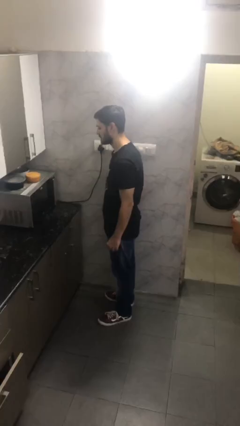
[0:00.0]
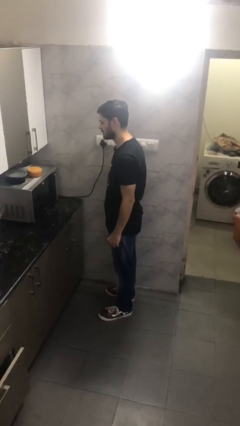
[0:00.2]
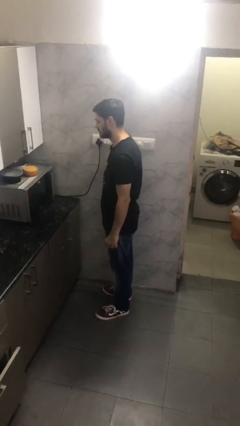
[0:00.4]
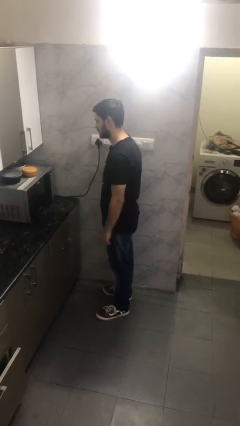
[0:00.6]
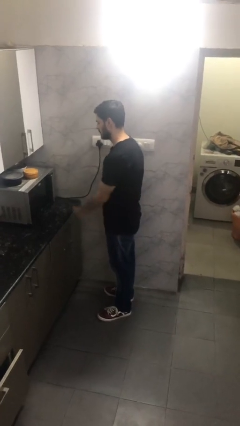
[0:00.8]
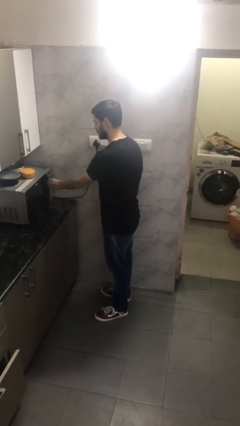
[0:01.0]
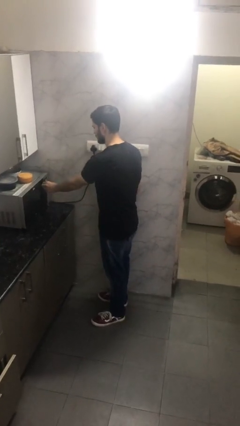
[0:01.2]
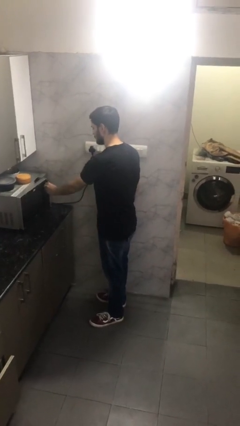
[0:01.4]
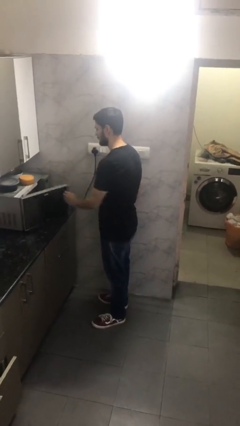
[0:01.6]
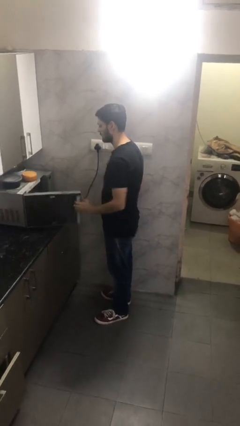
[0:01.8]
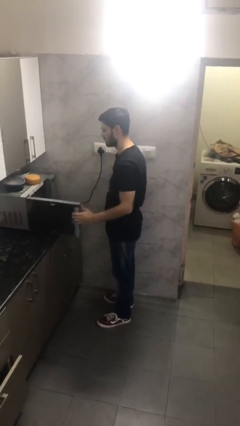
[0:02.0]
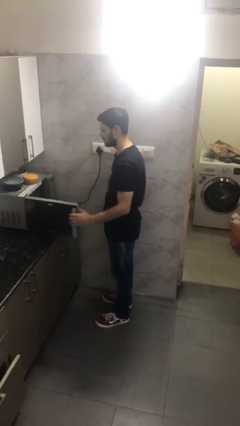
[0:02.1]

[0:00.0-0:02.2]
person opens microwave

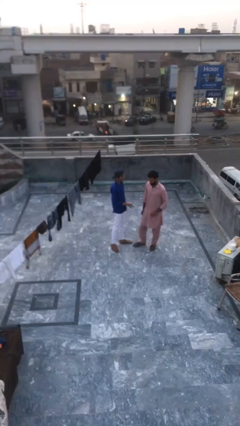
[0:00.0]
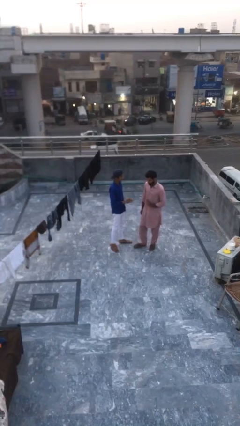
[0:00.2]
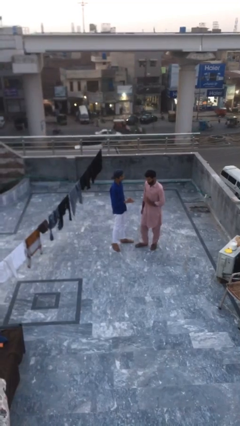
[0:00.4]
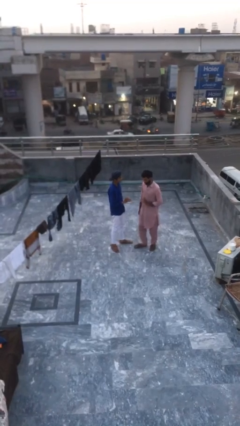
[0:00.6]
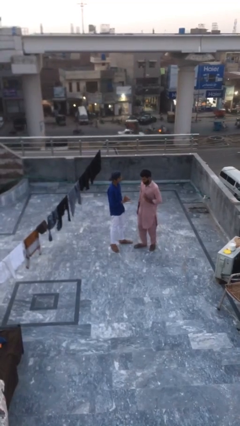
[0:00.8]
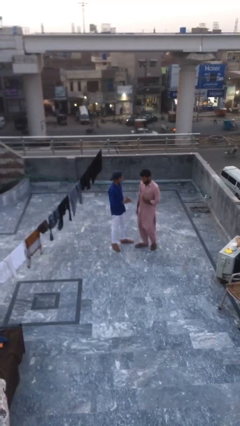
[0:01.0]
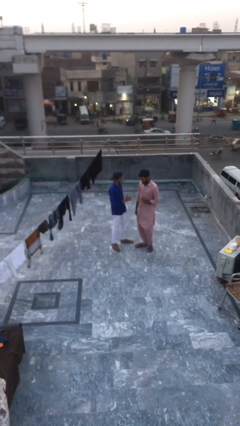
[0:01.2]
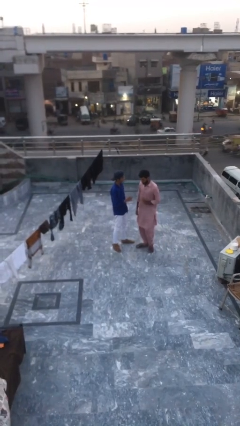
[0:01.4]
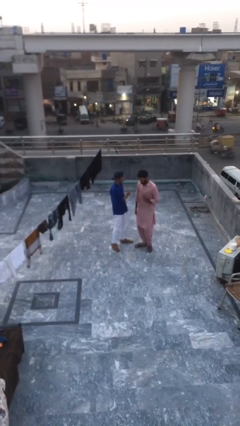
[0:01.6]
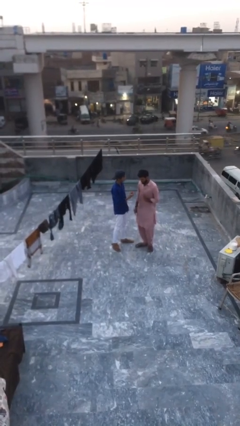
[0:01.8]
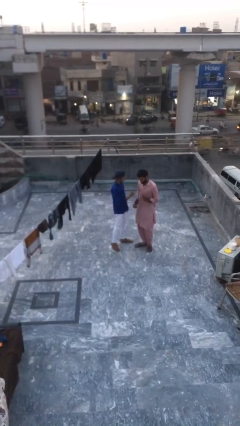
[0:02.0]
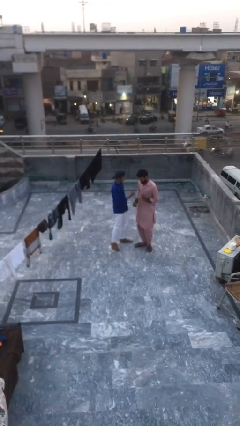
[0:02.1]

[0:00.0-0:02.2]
person talks to person

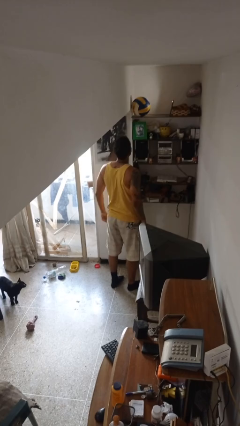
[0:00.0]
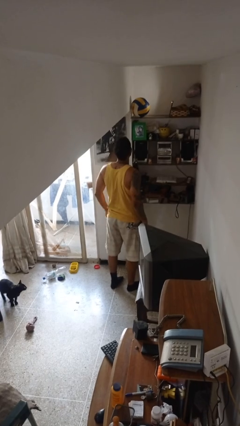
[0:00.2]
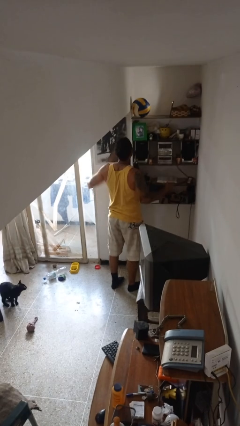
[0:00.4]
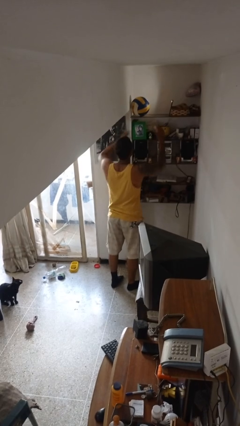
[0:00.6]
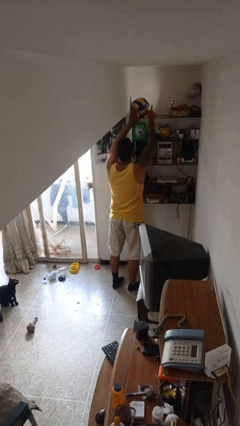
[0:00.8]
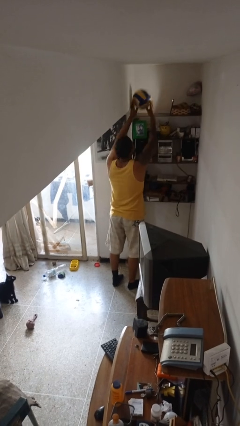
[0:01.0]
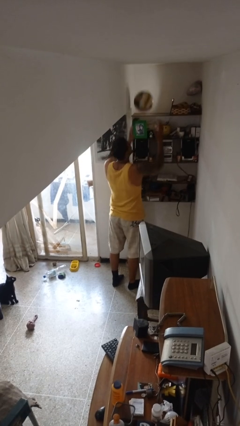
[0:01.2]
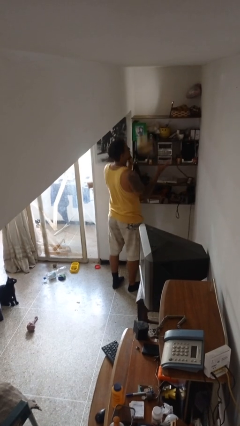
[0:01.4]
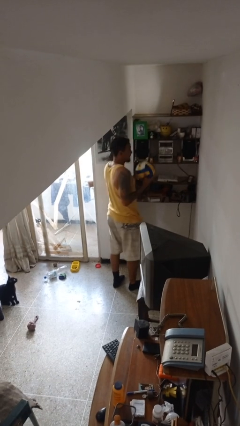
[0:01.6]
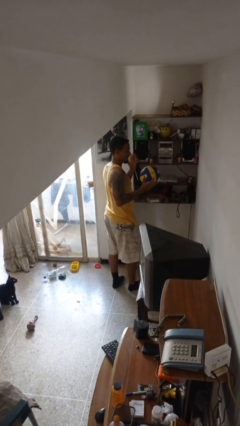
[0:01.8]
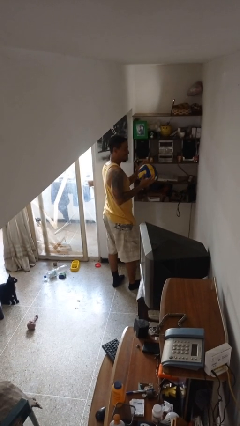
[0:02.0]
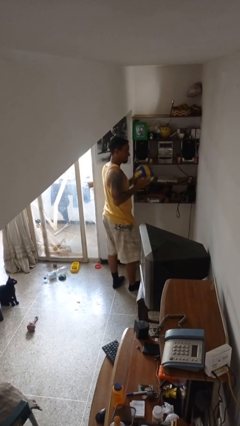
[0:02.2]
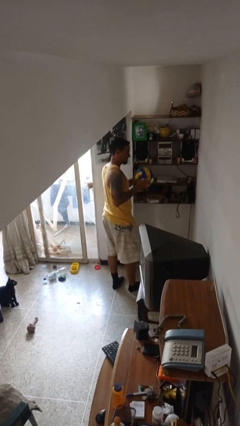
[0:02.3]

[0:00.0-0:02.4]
person picks up object from shelf

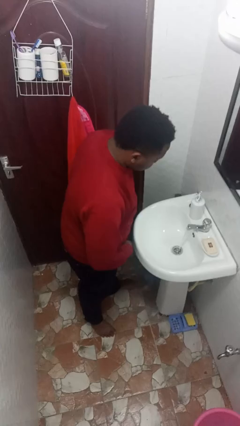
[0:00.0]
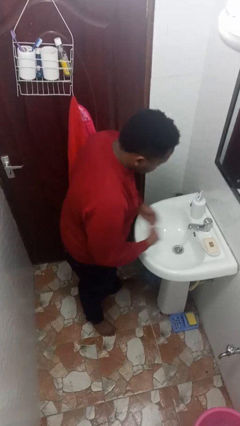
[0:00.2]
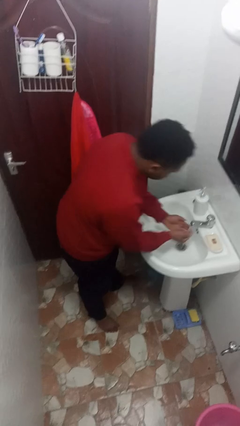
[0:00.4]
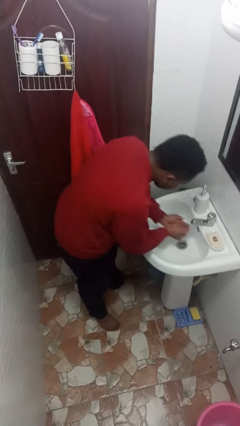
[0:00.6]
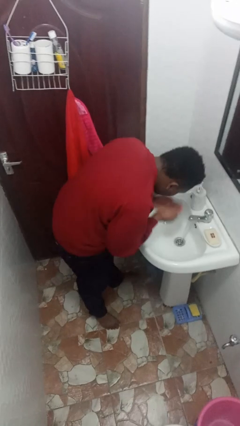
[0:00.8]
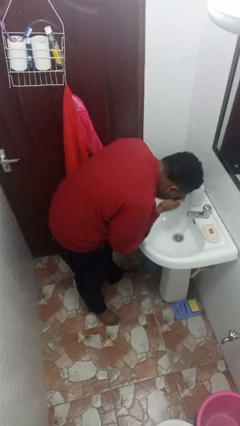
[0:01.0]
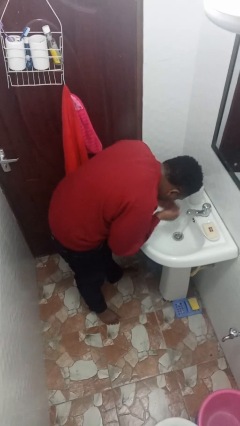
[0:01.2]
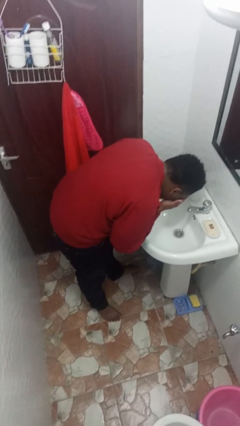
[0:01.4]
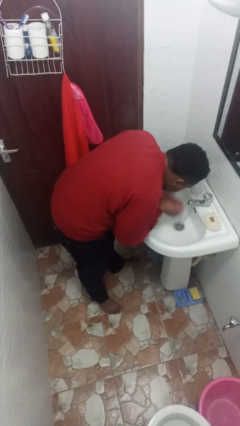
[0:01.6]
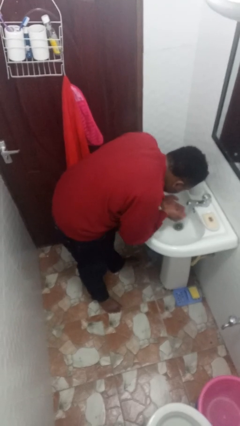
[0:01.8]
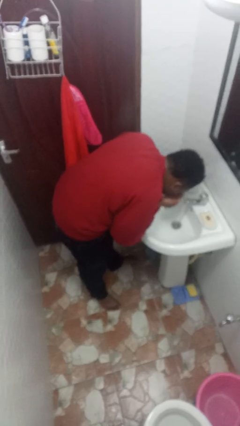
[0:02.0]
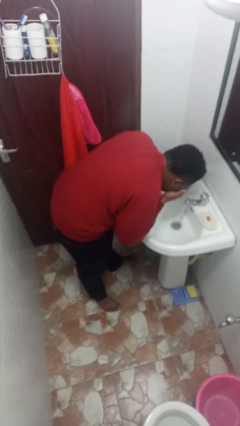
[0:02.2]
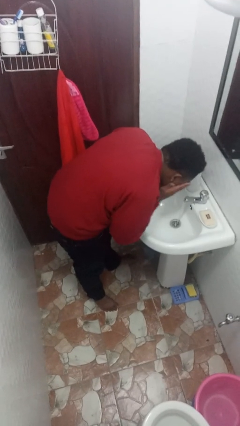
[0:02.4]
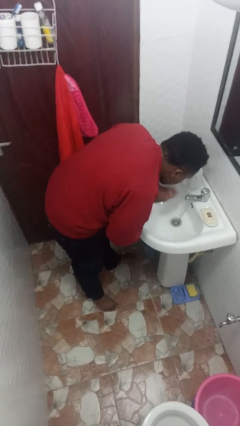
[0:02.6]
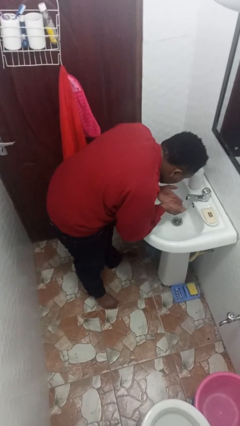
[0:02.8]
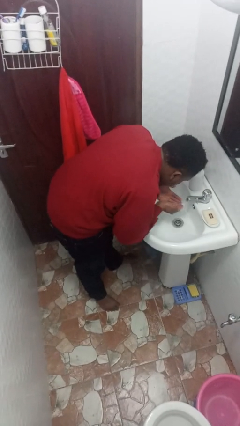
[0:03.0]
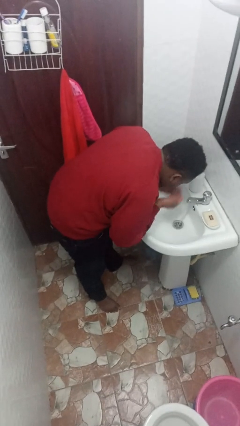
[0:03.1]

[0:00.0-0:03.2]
person washes face

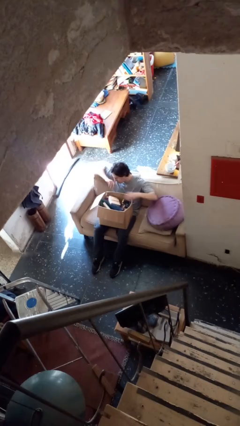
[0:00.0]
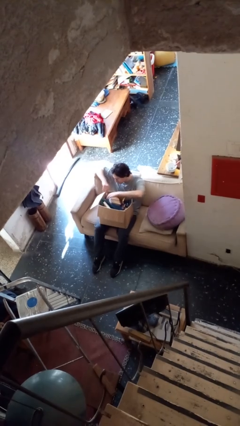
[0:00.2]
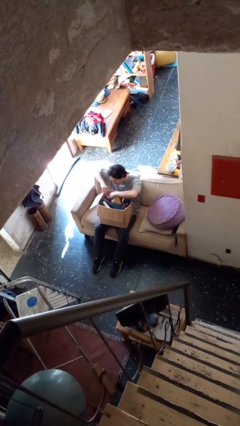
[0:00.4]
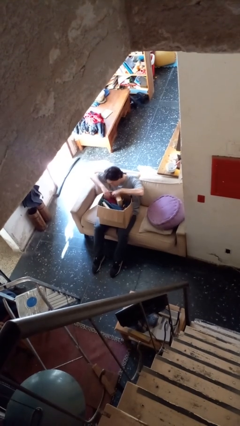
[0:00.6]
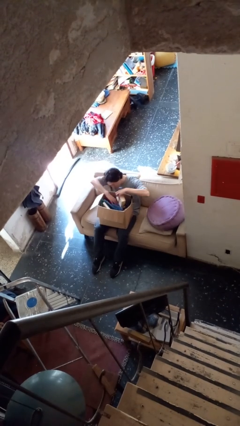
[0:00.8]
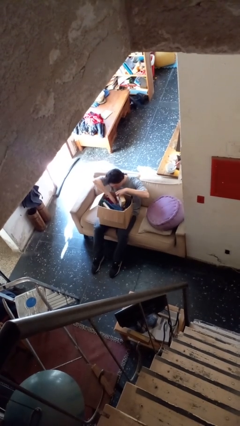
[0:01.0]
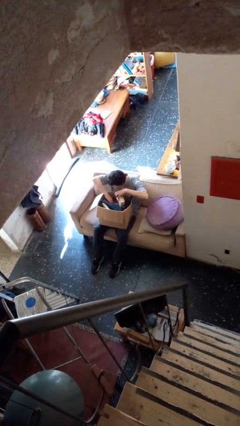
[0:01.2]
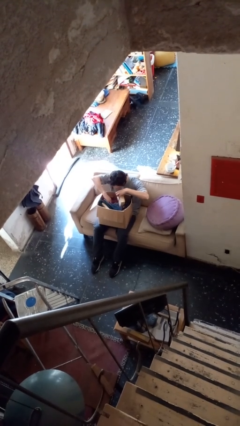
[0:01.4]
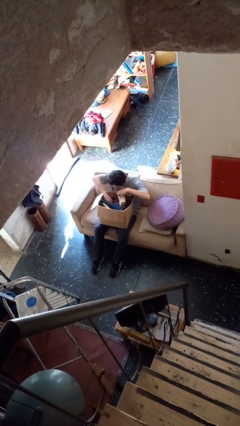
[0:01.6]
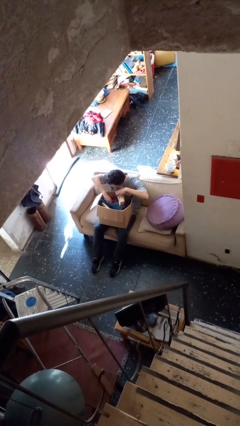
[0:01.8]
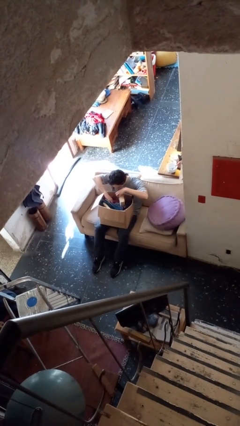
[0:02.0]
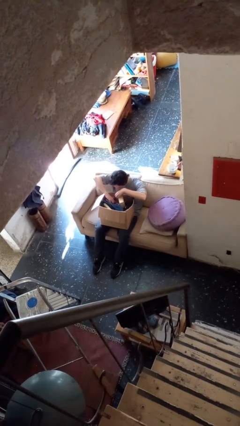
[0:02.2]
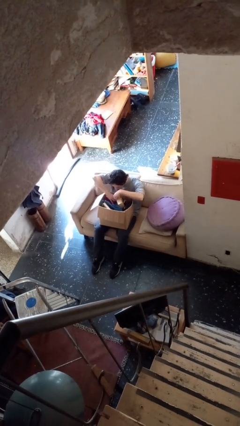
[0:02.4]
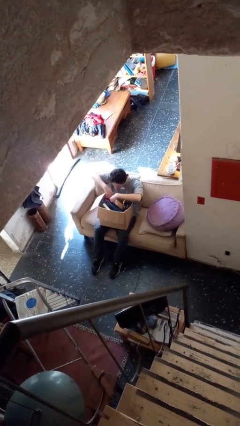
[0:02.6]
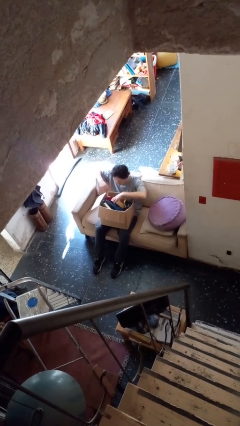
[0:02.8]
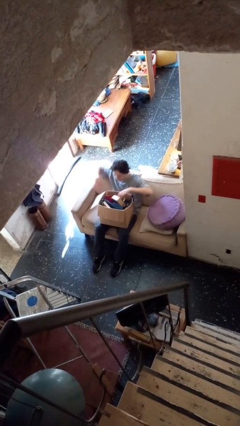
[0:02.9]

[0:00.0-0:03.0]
person searches in box

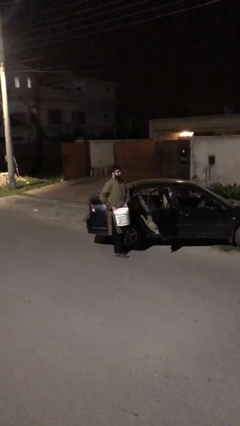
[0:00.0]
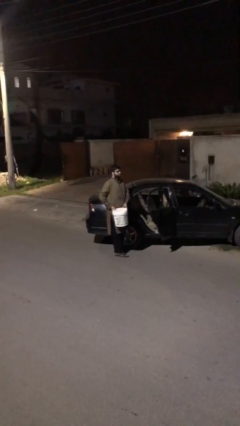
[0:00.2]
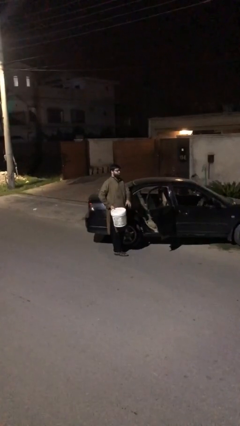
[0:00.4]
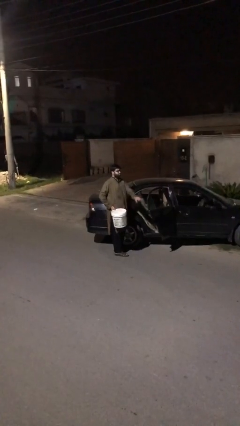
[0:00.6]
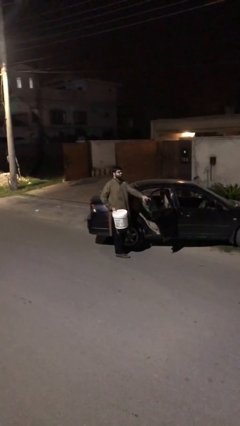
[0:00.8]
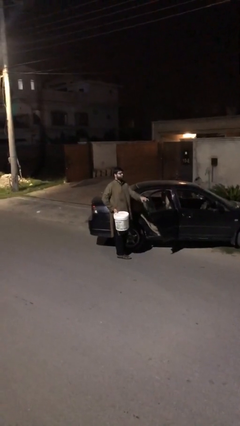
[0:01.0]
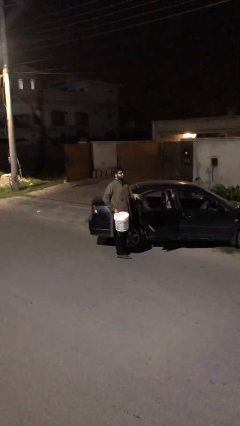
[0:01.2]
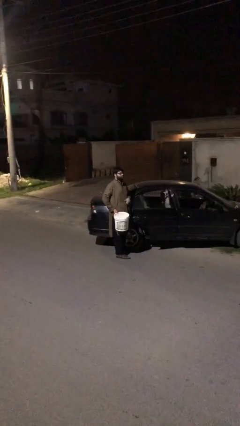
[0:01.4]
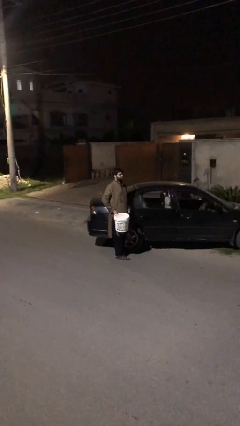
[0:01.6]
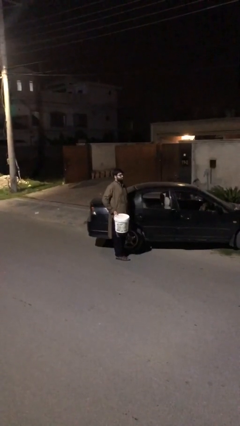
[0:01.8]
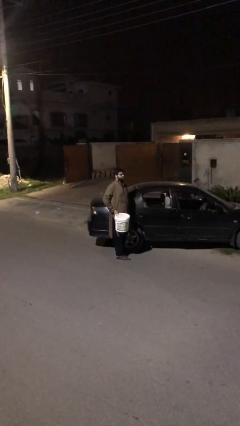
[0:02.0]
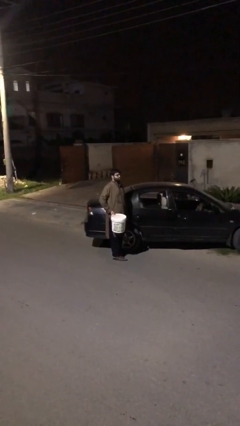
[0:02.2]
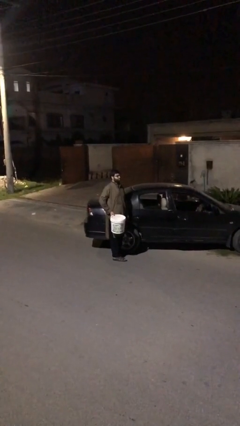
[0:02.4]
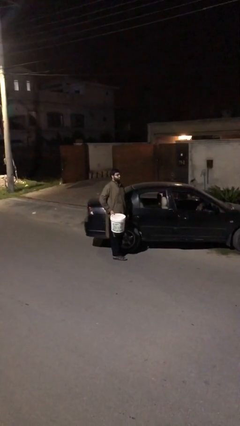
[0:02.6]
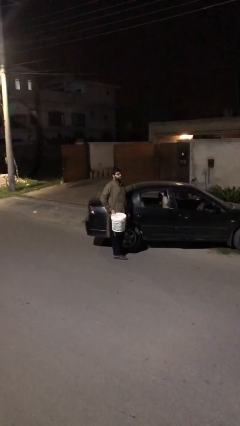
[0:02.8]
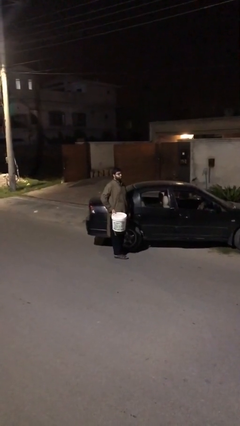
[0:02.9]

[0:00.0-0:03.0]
person closes car door

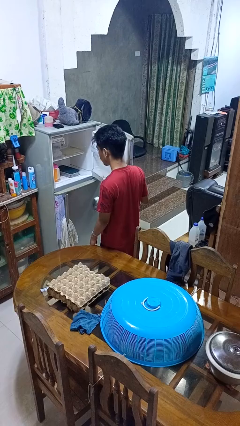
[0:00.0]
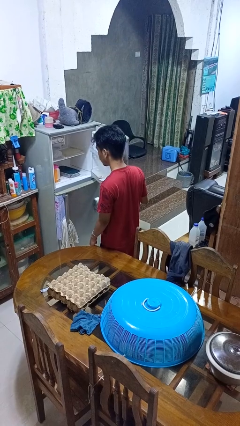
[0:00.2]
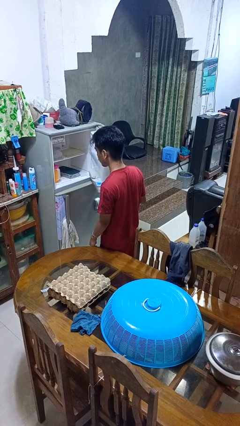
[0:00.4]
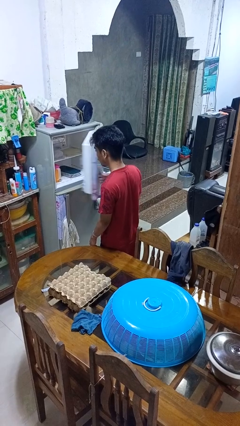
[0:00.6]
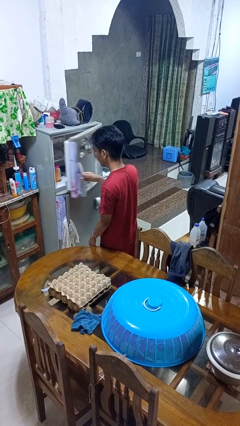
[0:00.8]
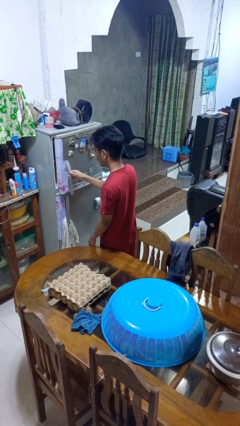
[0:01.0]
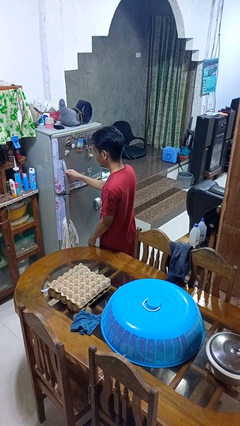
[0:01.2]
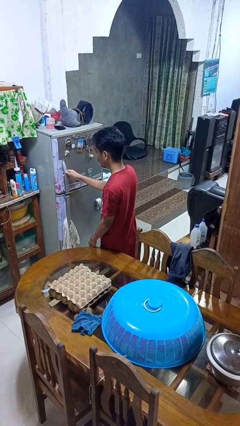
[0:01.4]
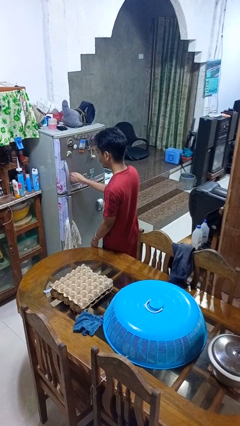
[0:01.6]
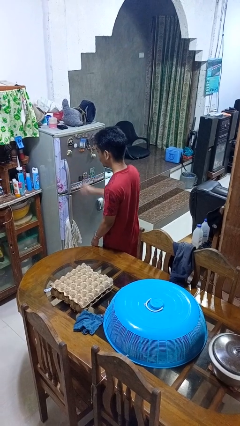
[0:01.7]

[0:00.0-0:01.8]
person closes refrigerator
